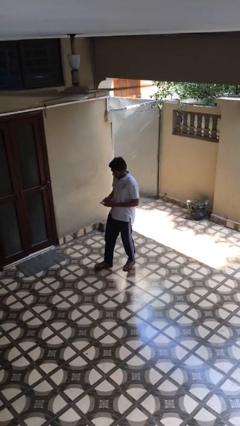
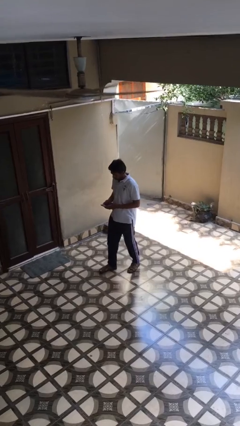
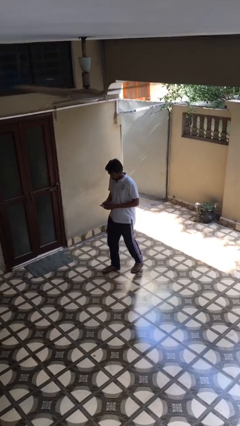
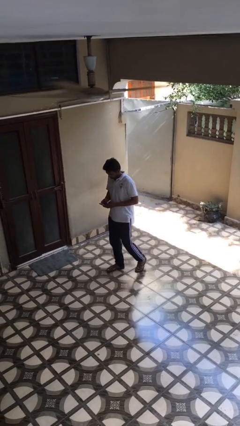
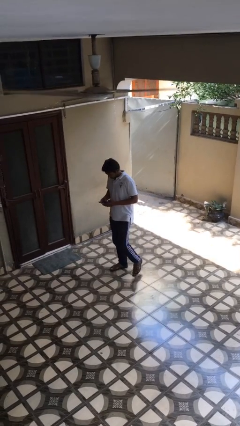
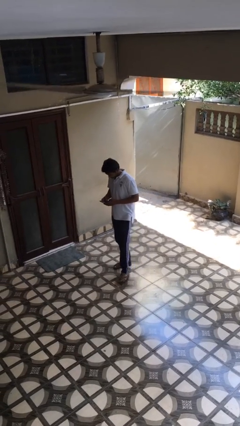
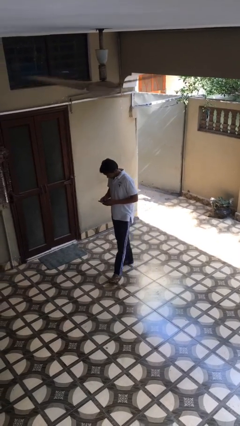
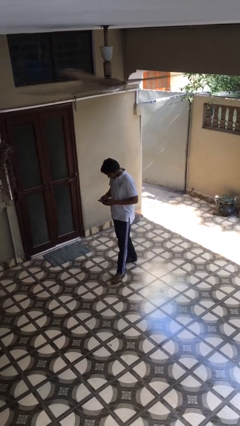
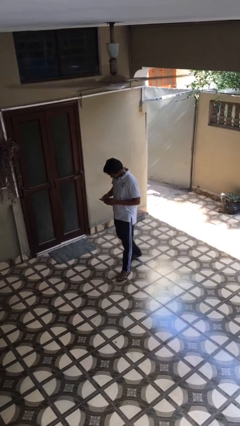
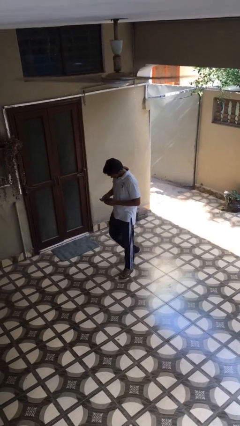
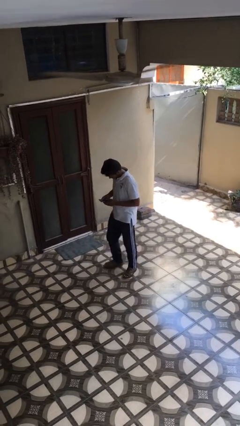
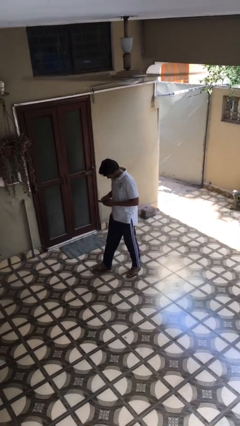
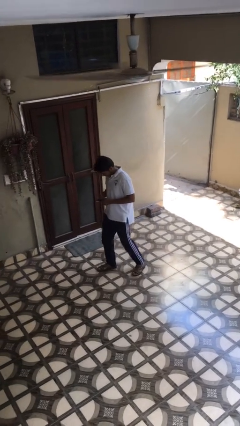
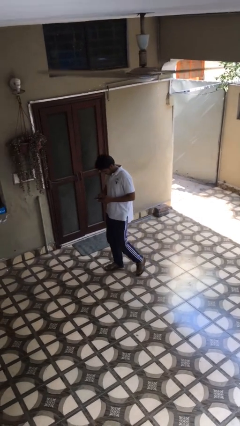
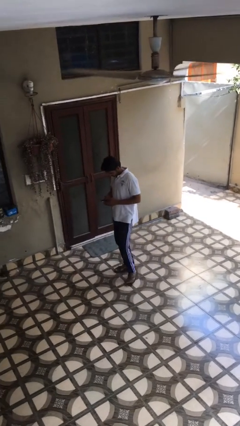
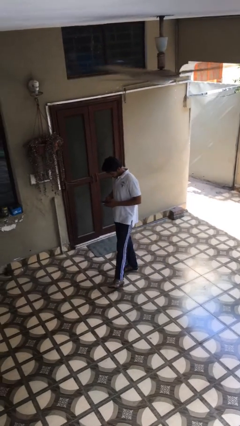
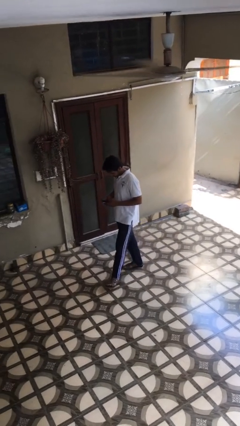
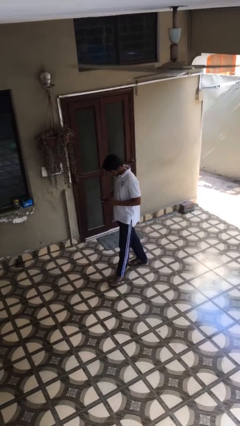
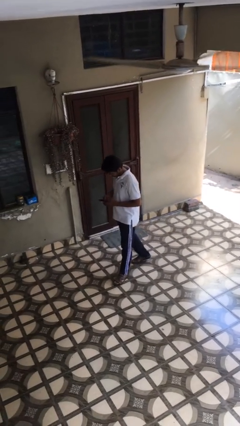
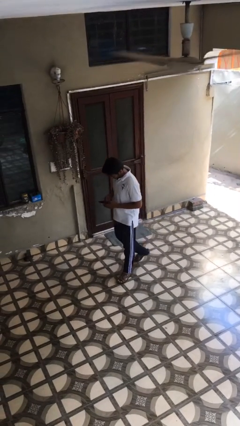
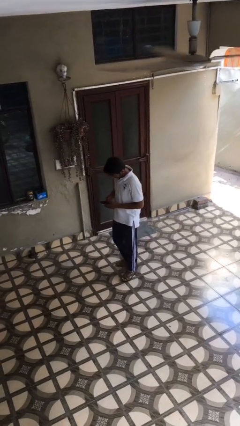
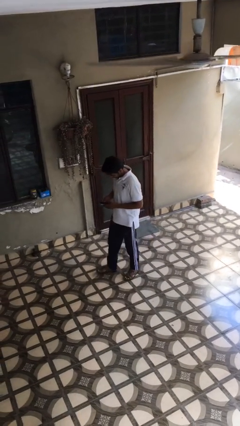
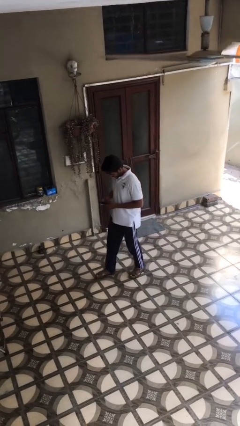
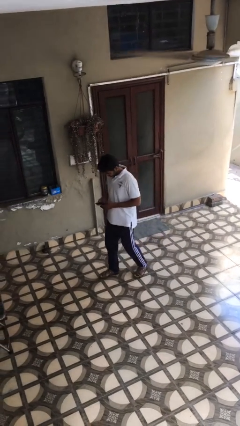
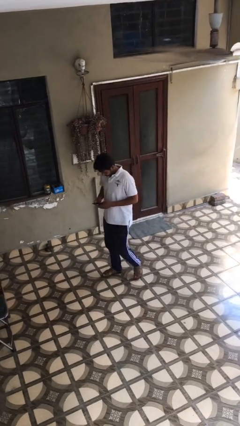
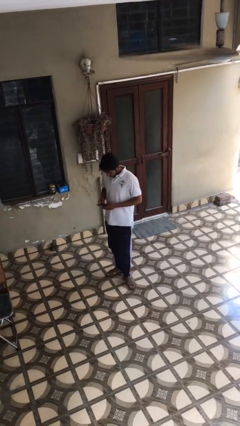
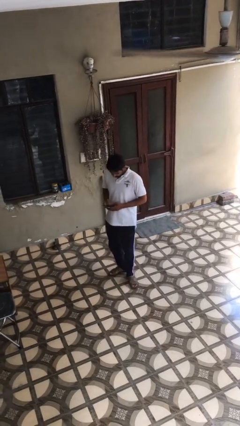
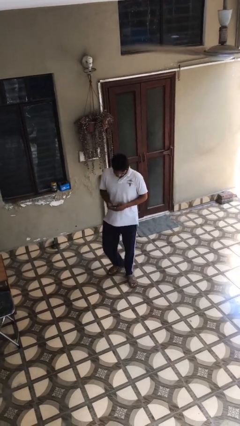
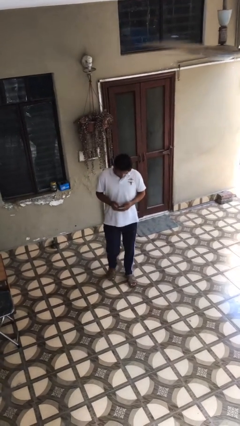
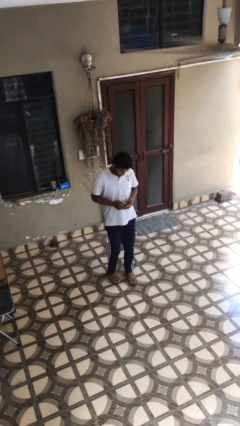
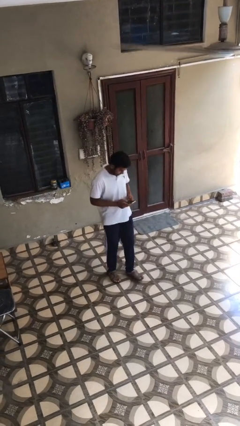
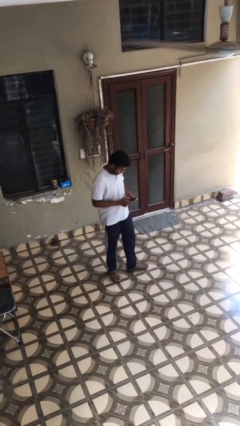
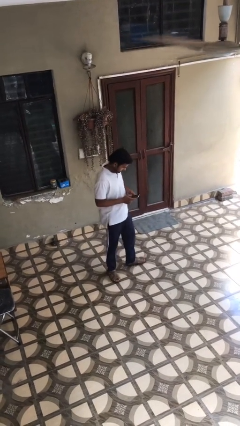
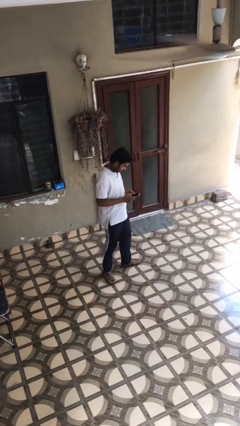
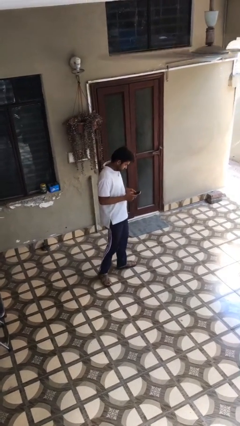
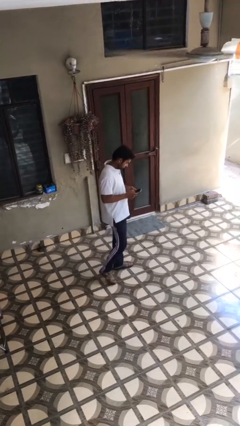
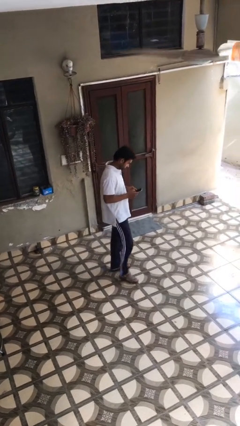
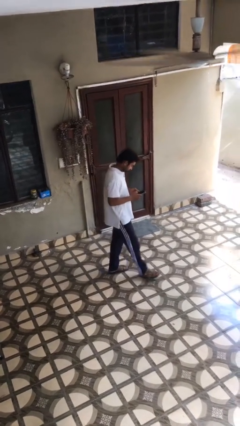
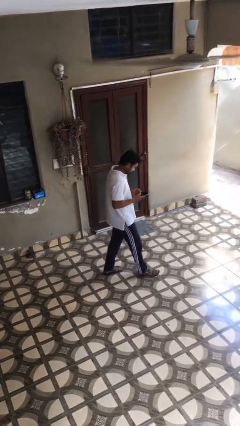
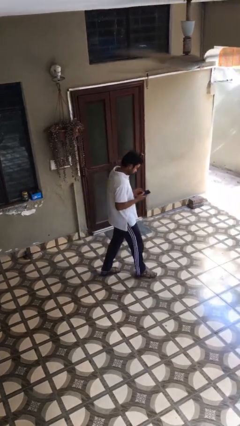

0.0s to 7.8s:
person texts on phone

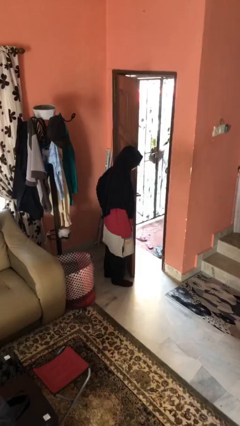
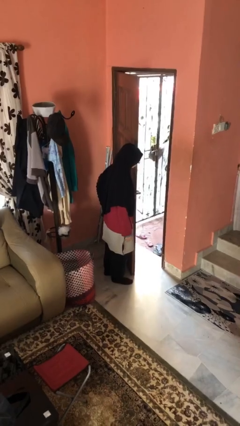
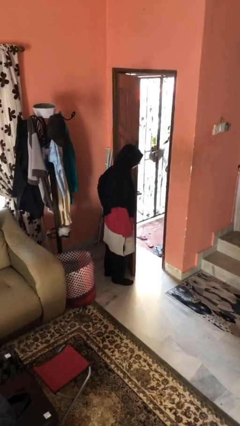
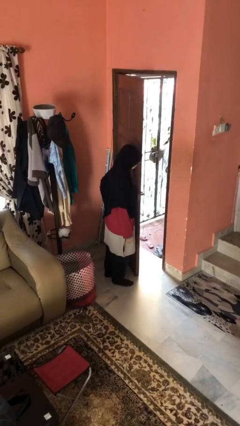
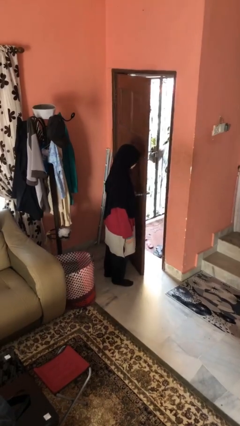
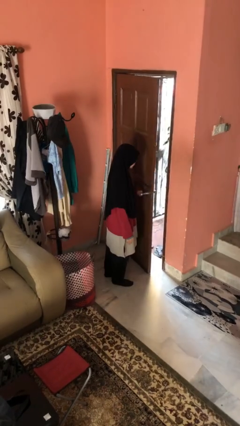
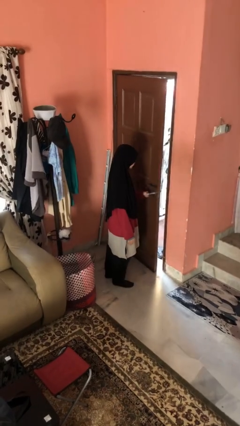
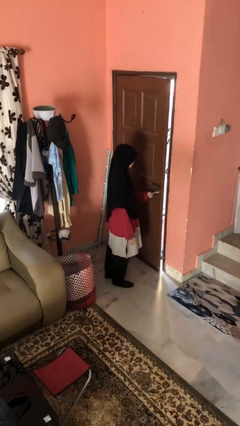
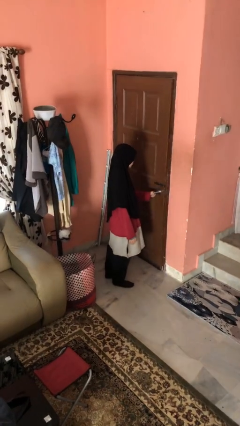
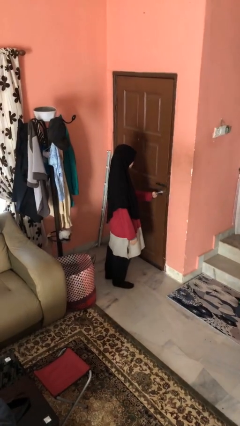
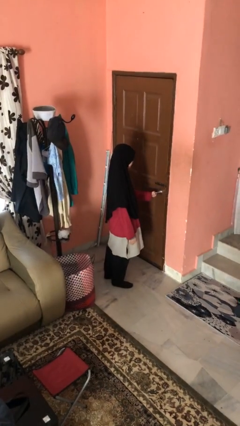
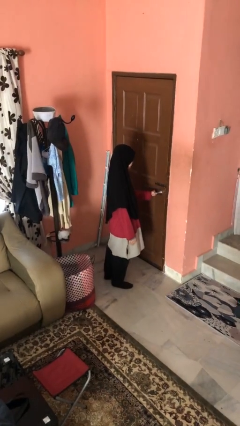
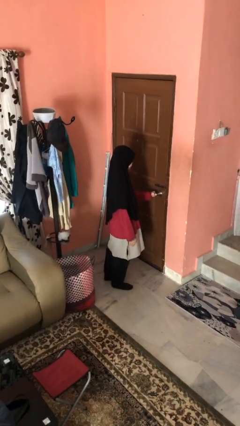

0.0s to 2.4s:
person closes facility door

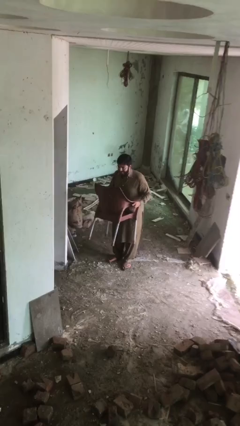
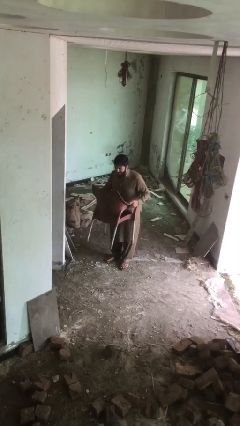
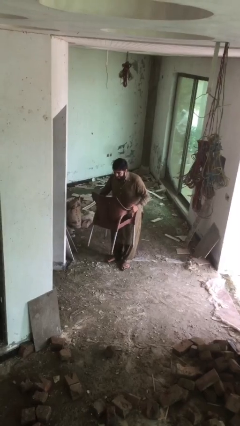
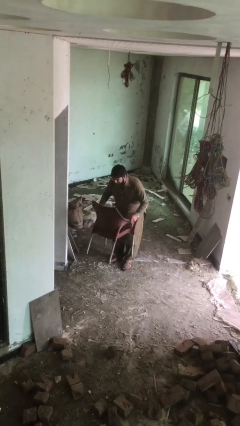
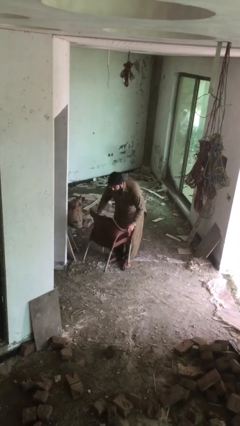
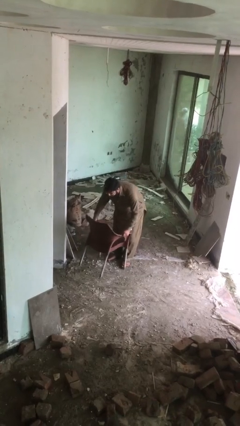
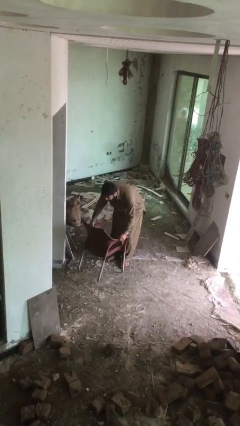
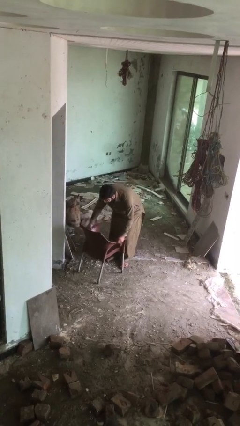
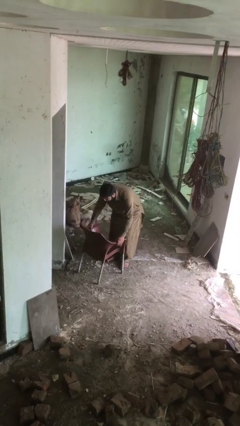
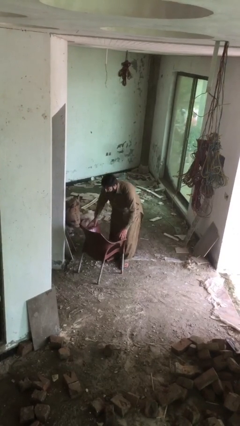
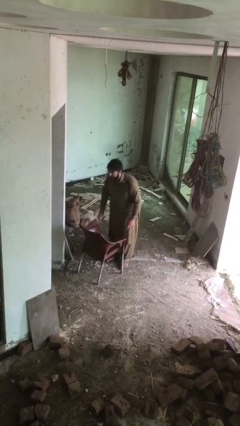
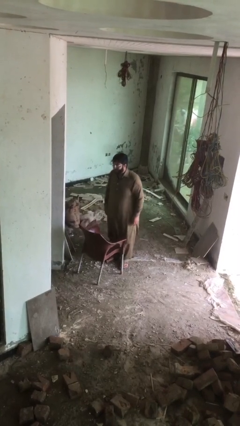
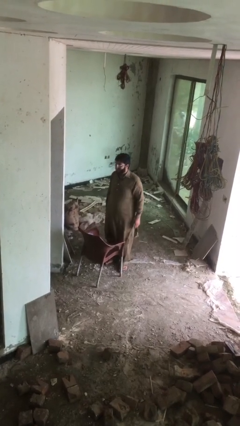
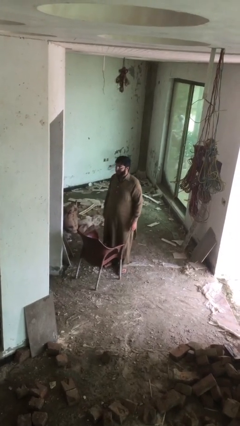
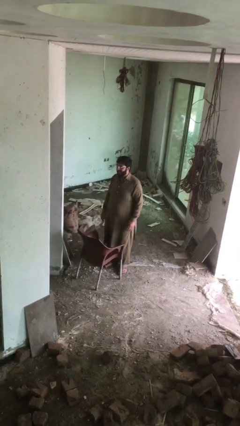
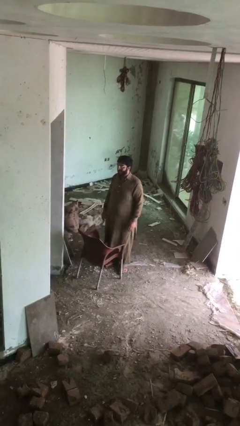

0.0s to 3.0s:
person puts down object on floor

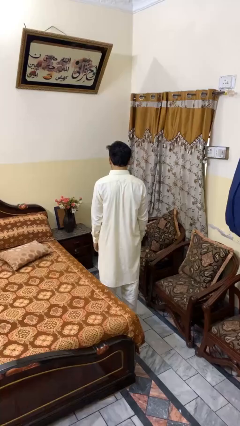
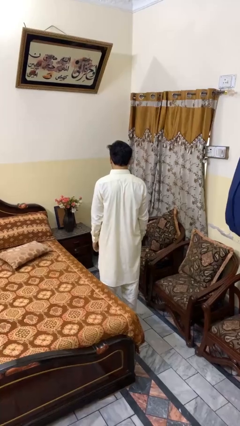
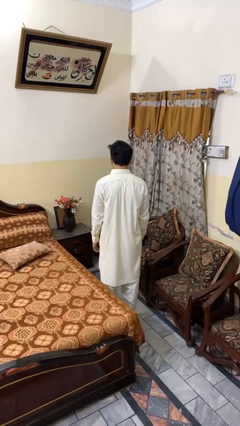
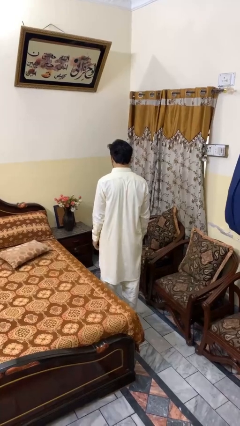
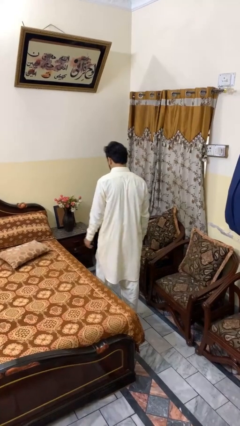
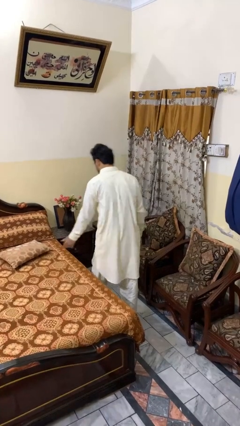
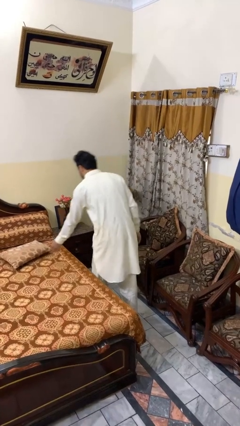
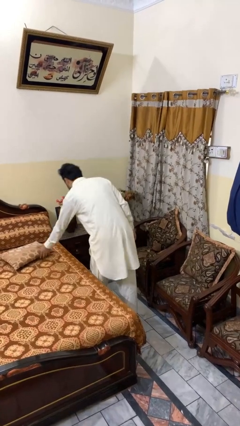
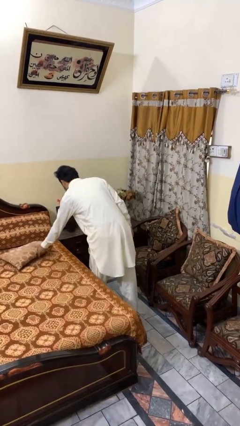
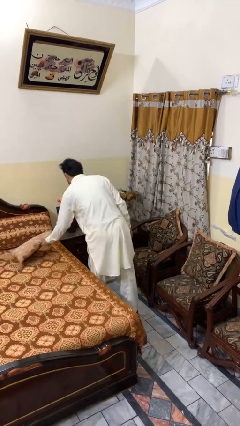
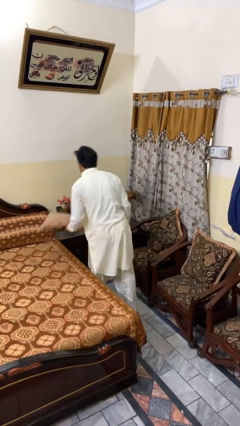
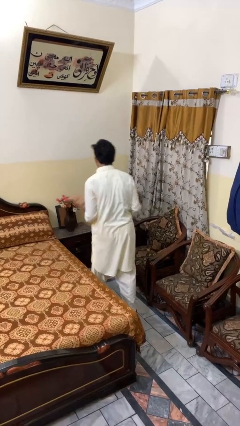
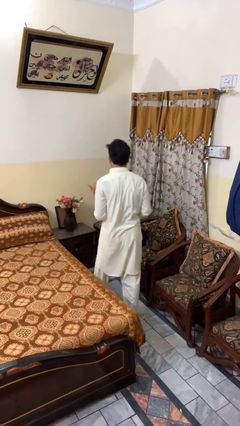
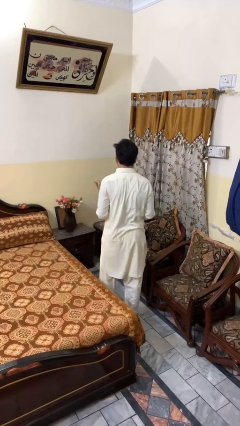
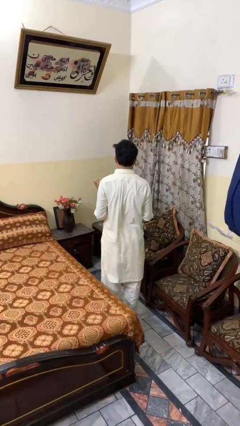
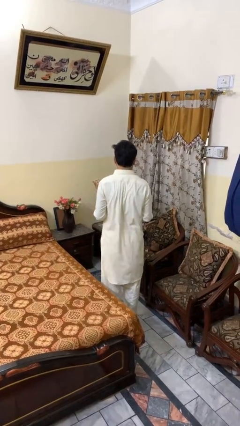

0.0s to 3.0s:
person picks up object from bed

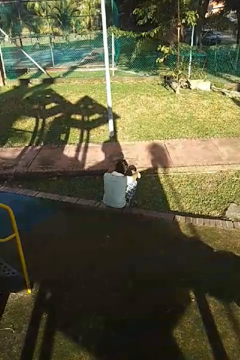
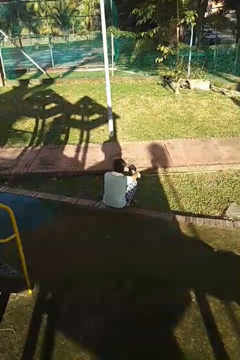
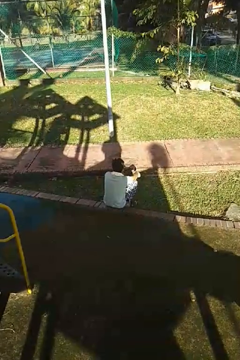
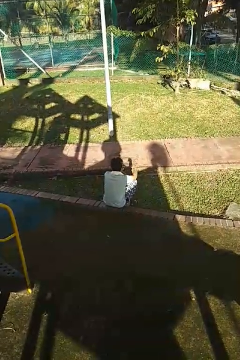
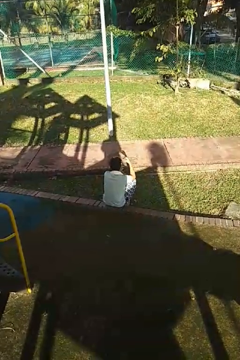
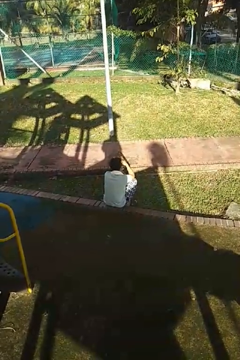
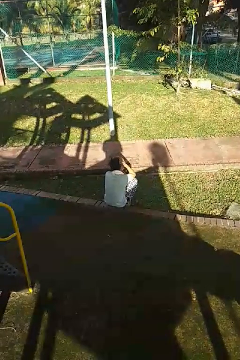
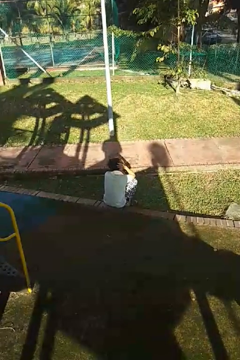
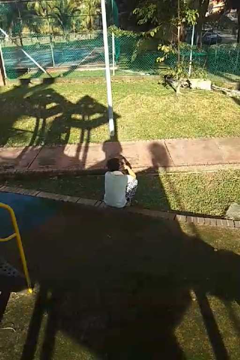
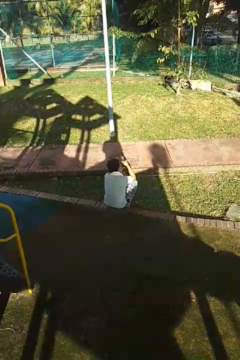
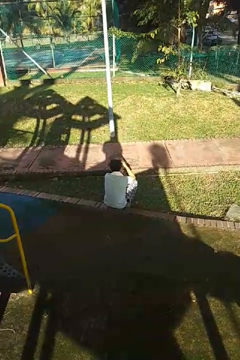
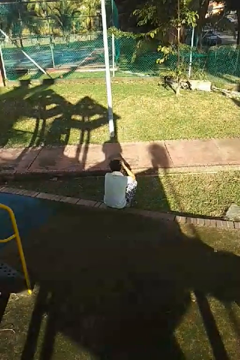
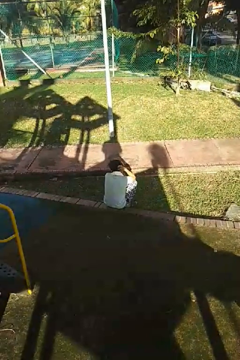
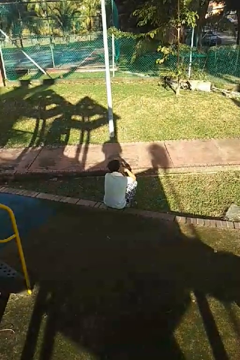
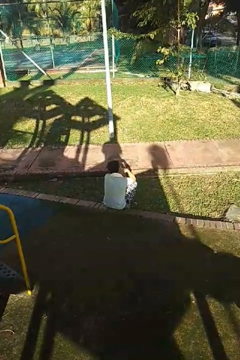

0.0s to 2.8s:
person strokes hair
